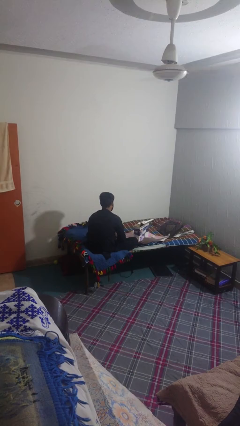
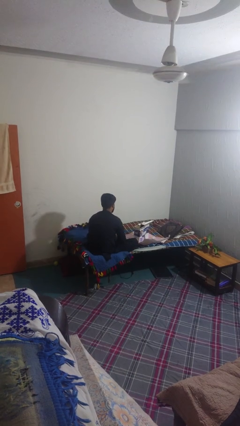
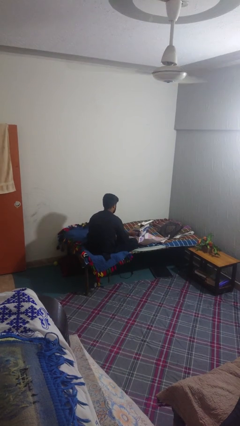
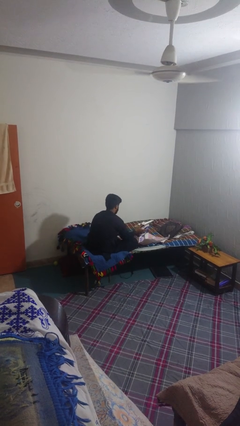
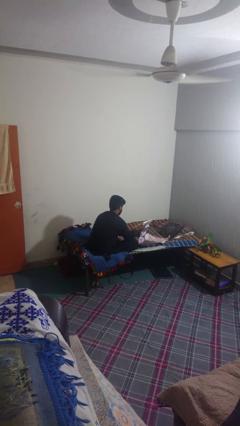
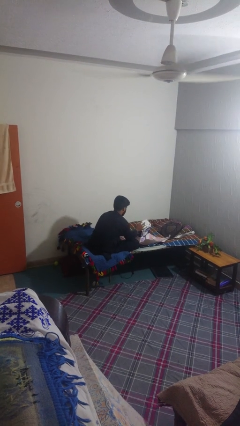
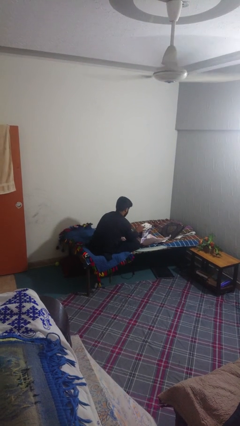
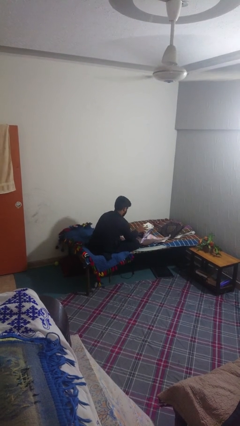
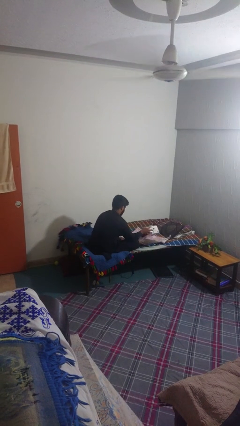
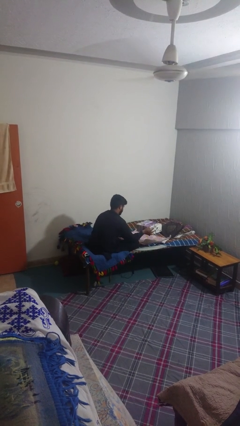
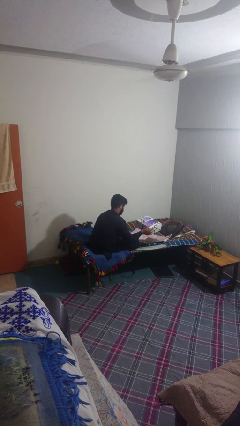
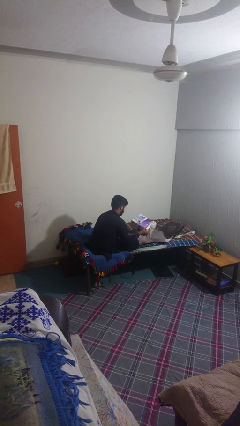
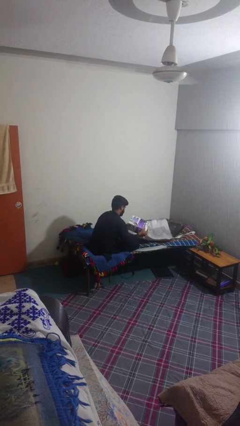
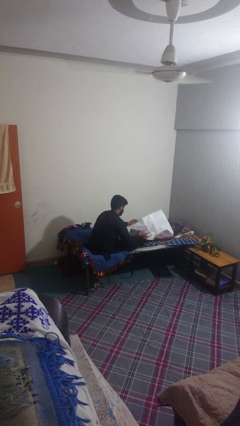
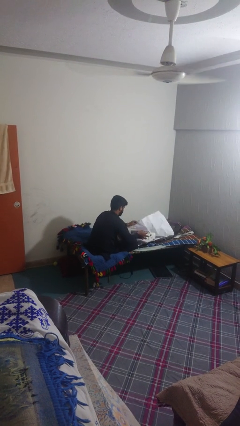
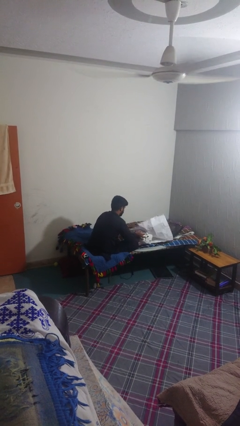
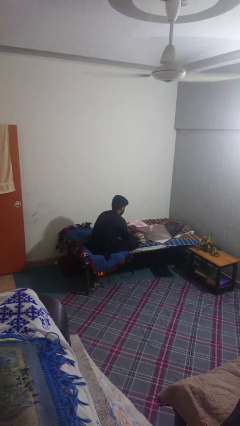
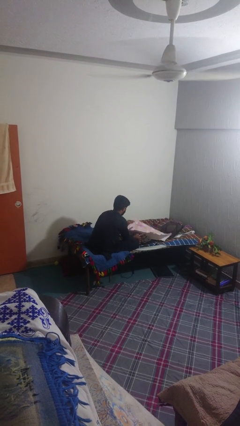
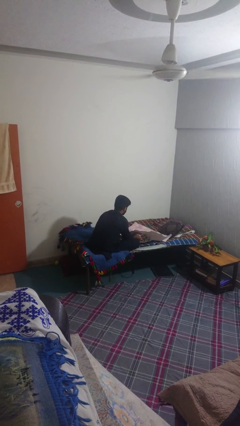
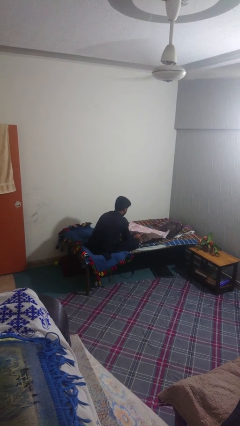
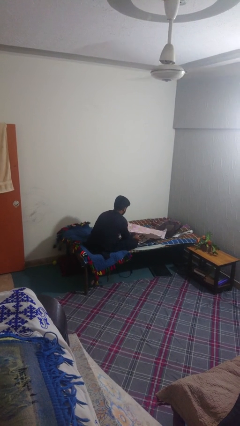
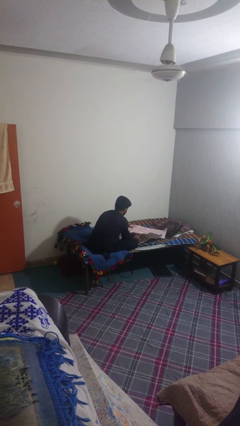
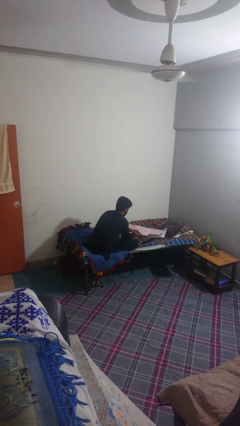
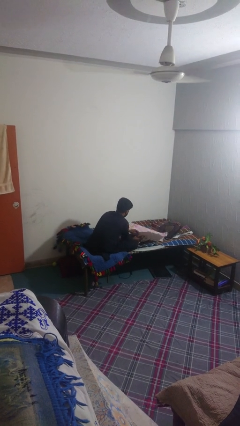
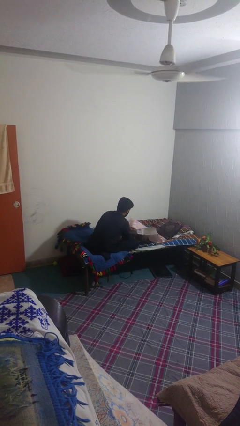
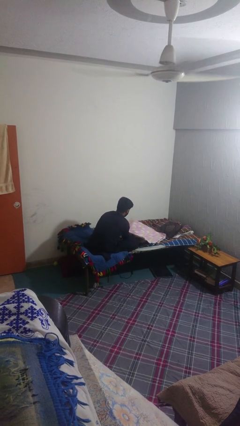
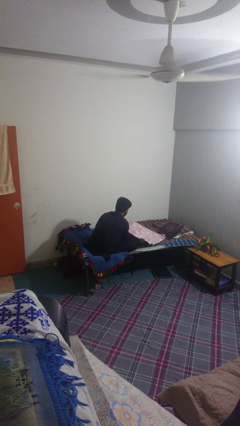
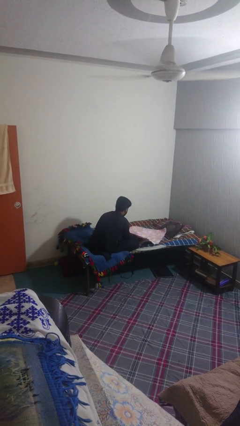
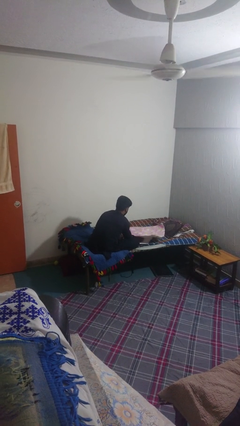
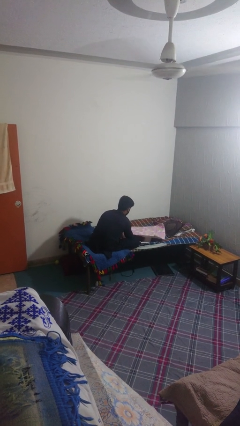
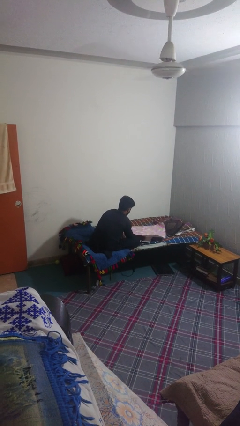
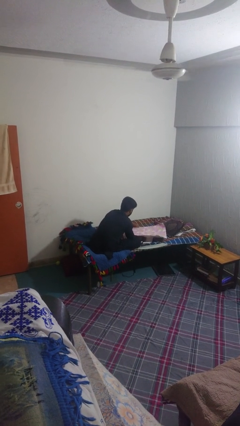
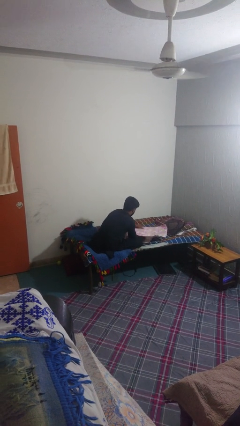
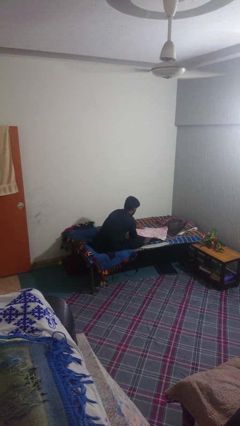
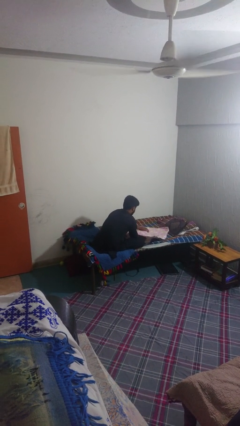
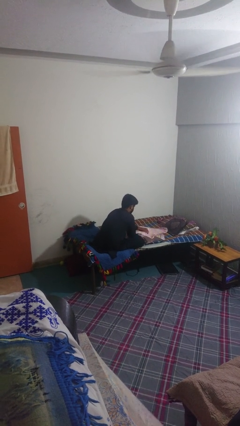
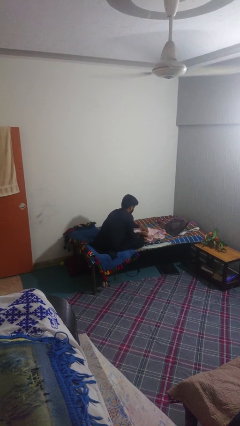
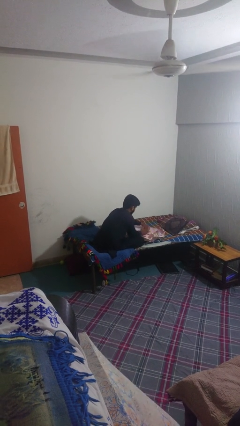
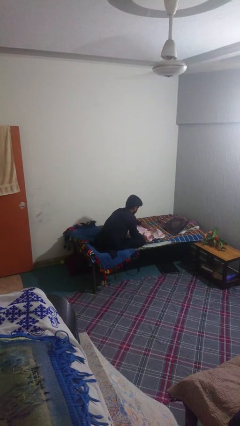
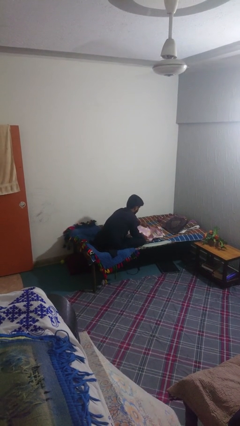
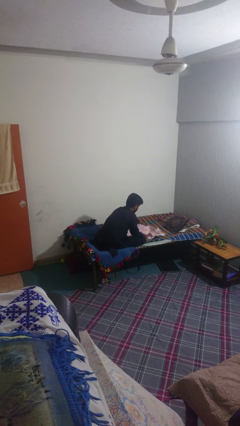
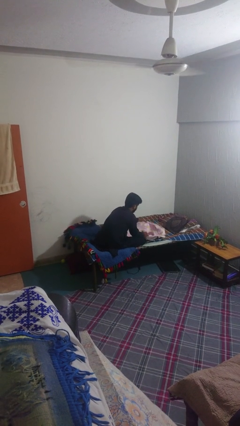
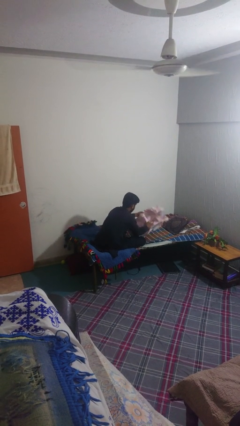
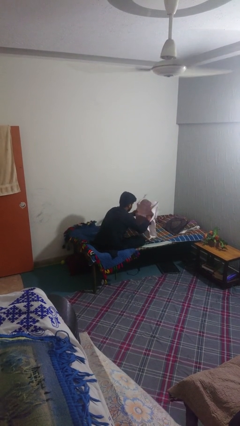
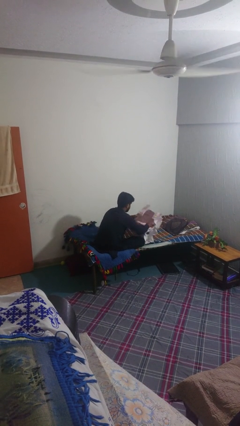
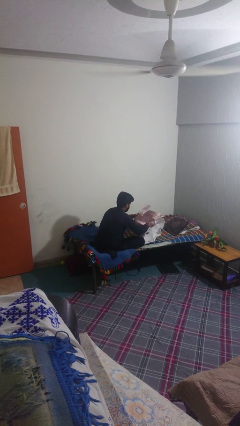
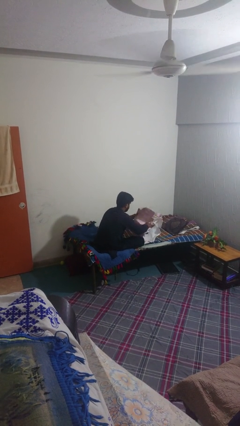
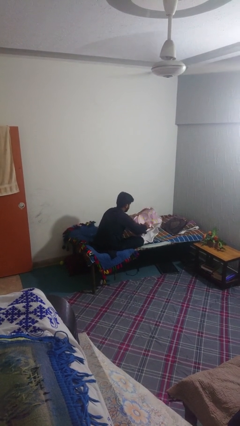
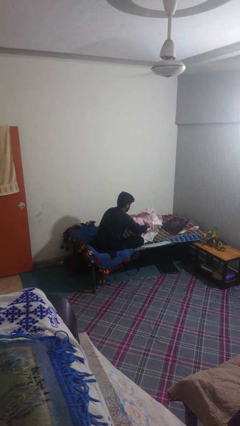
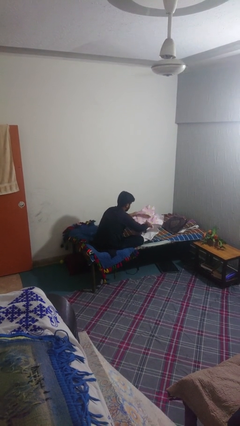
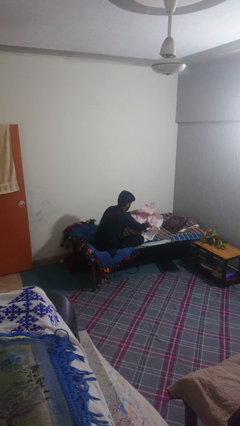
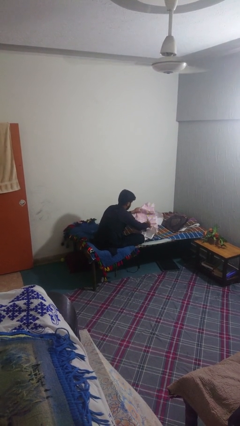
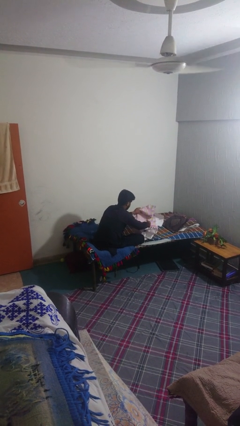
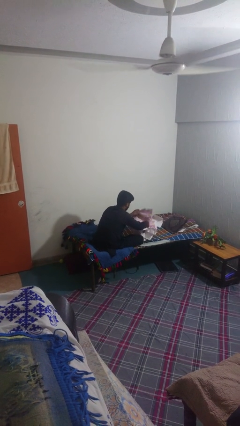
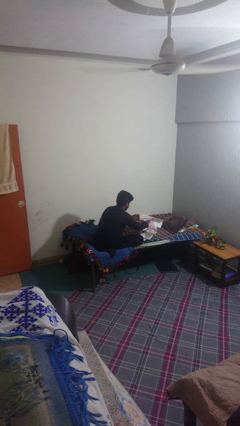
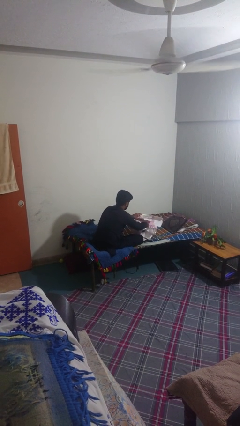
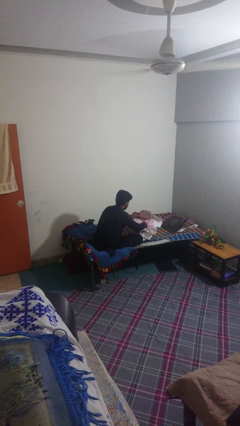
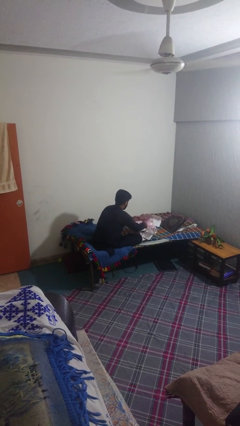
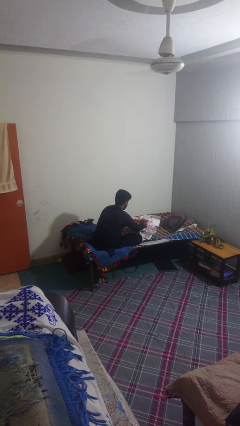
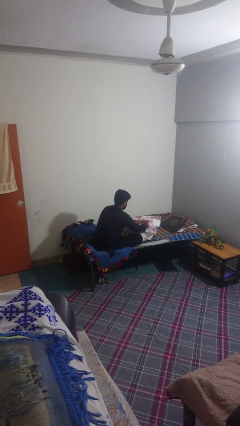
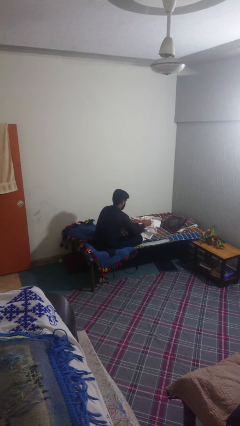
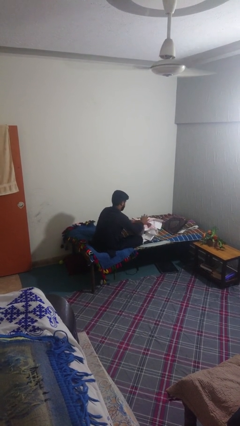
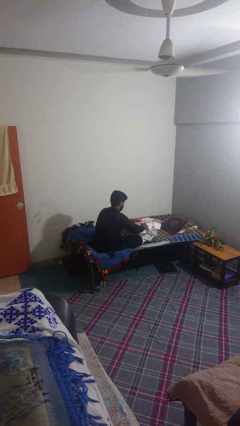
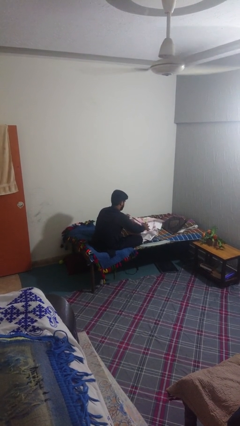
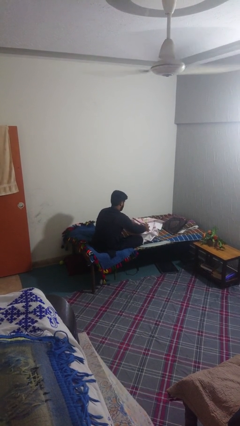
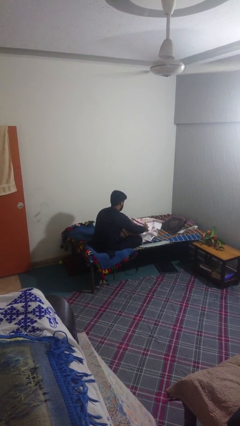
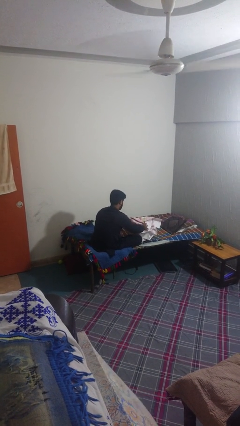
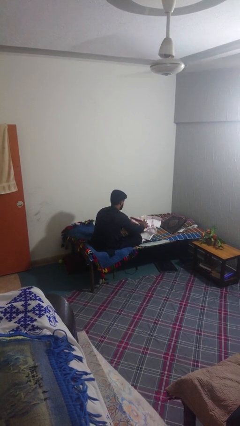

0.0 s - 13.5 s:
person wraps box

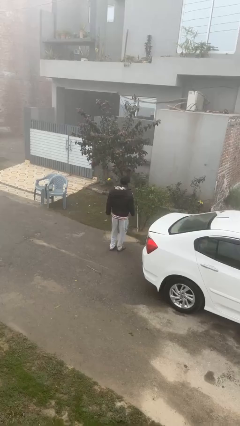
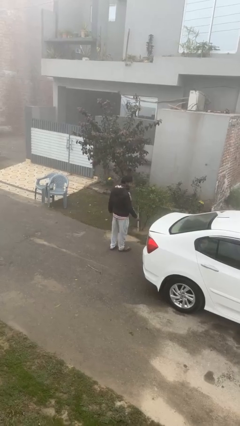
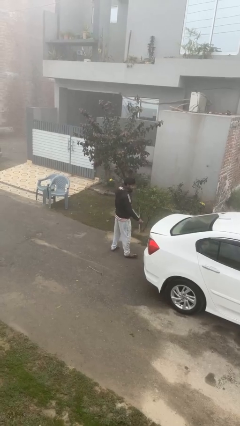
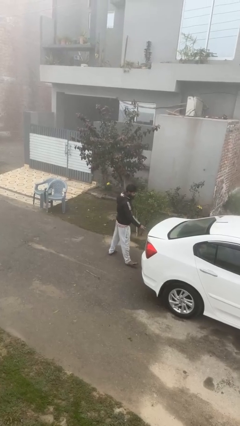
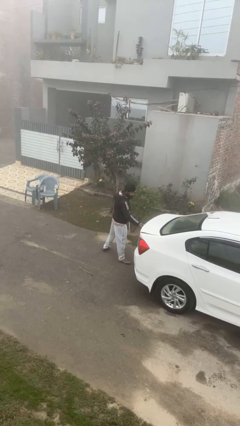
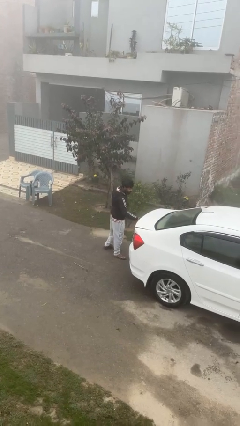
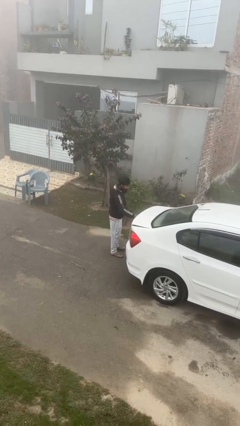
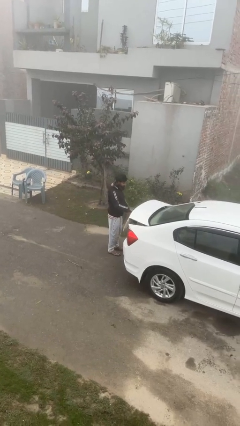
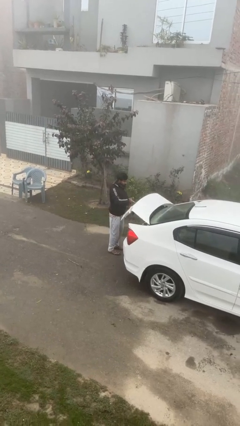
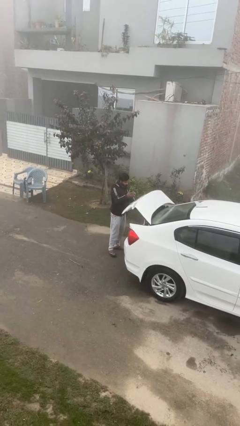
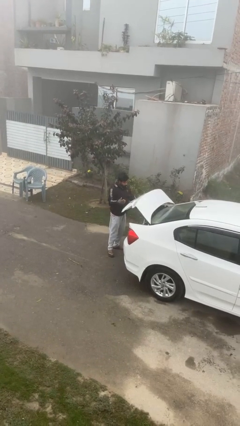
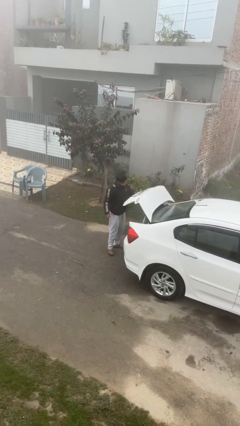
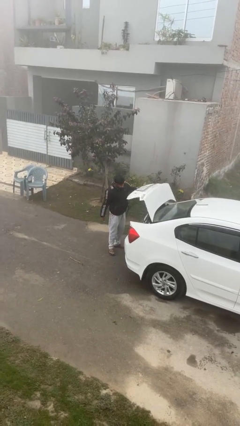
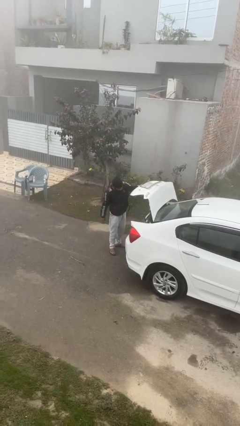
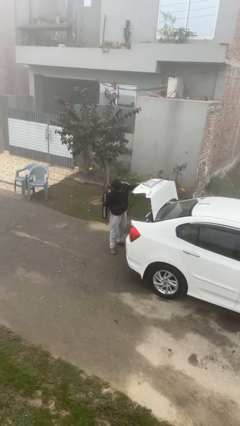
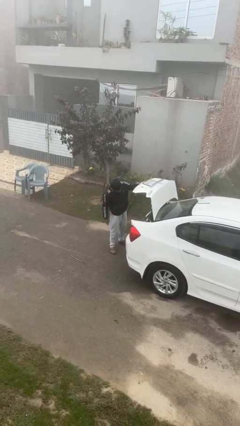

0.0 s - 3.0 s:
person opens car trunk

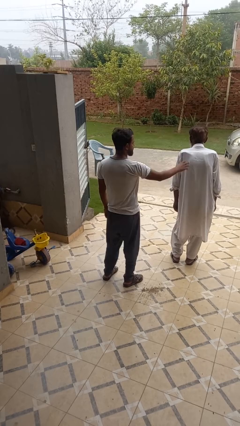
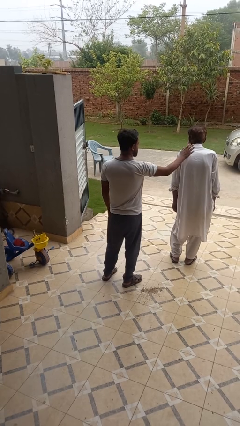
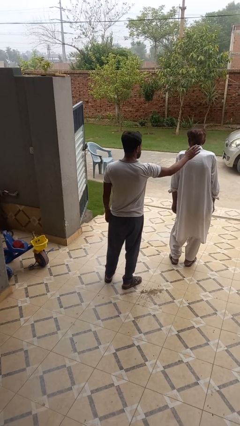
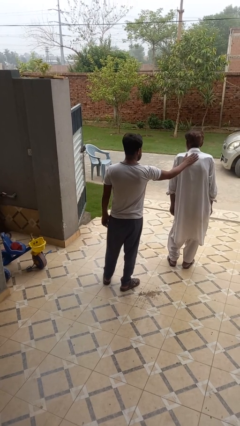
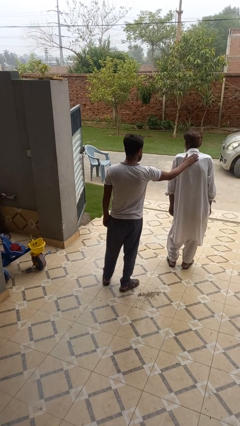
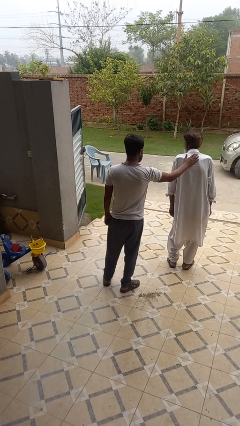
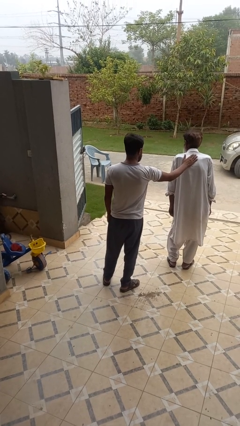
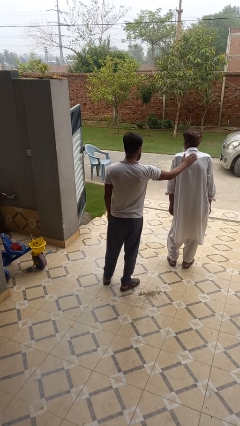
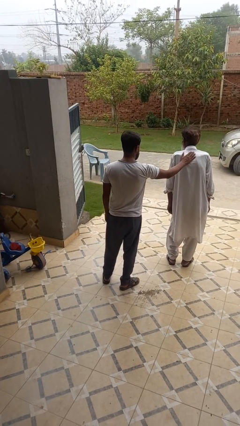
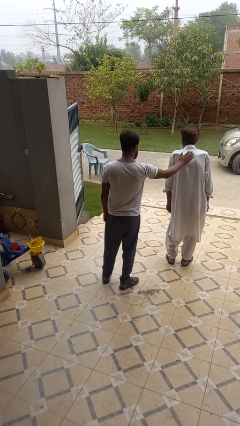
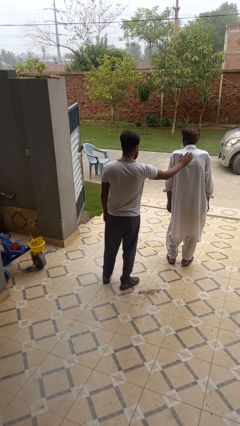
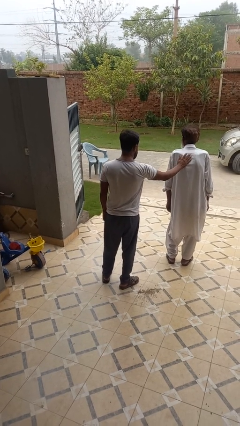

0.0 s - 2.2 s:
person touches back of person
